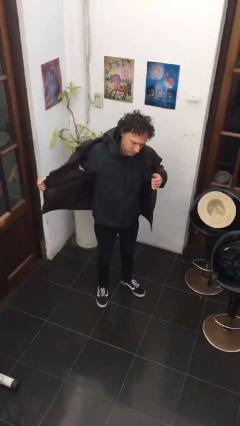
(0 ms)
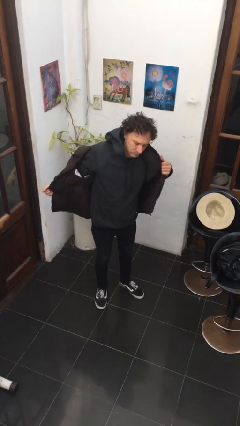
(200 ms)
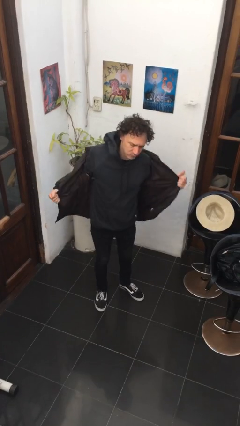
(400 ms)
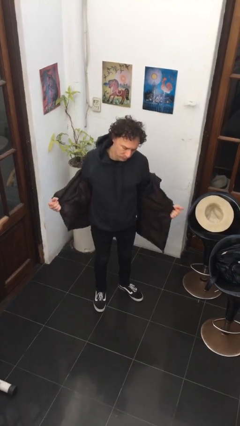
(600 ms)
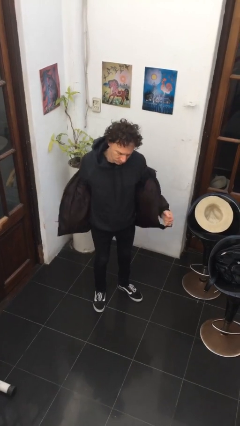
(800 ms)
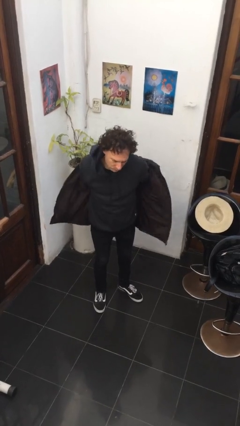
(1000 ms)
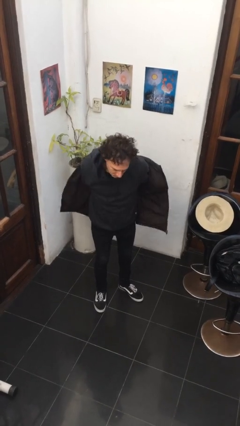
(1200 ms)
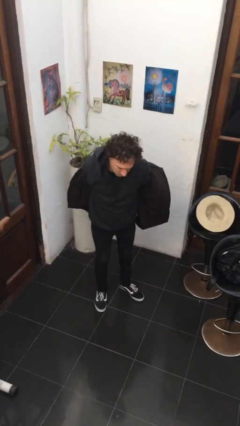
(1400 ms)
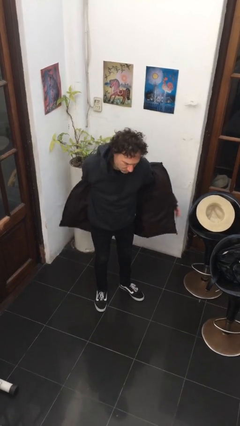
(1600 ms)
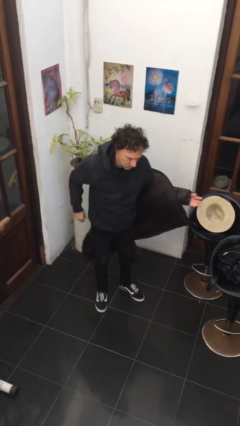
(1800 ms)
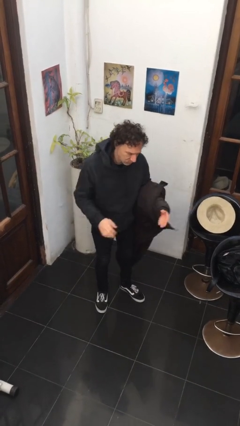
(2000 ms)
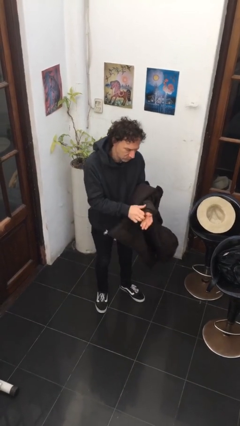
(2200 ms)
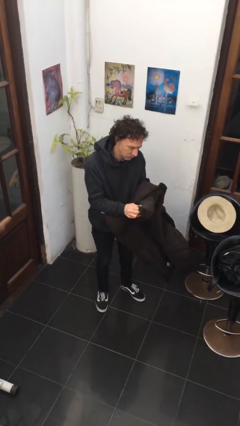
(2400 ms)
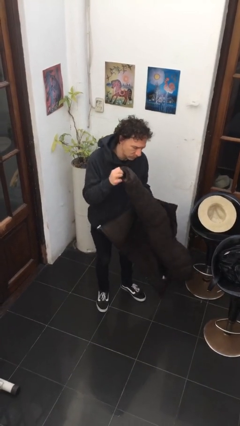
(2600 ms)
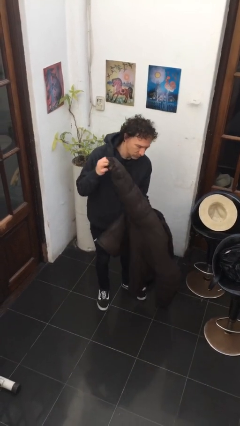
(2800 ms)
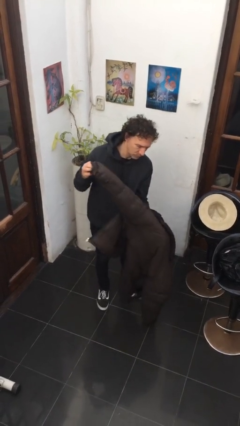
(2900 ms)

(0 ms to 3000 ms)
person takes off jacket

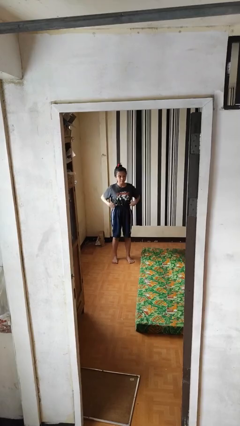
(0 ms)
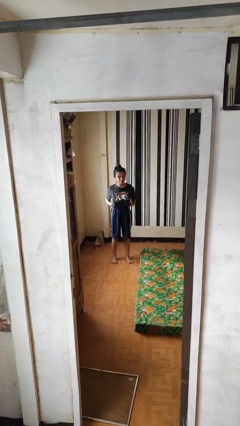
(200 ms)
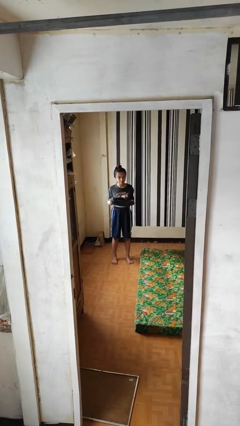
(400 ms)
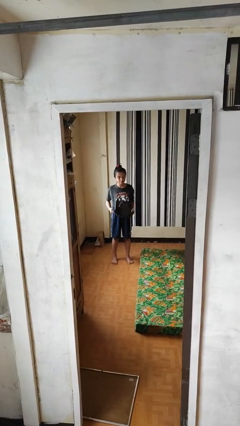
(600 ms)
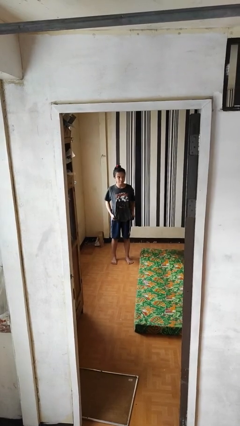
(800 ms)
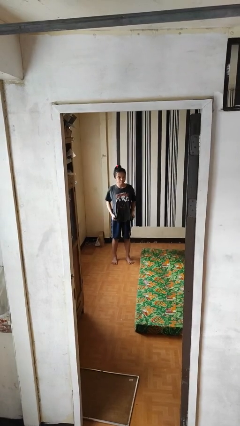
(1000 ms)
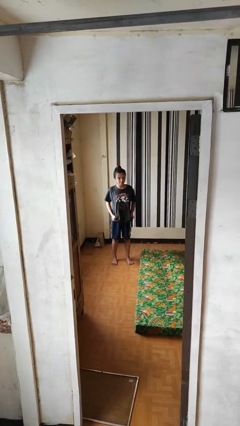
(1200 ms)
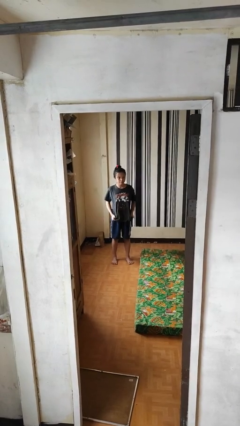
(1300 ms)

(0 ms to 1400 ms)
person untucks shirt

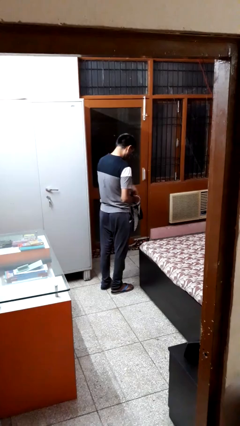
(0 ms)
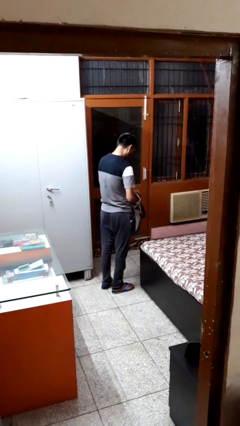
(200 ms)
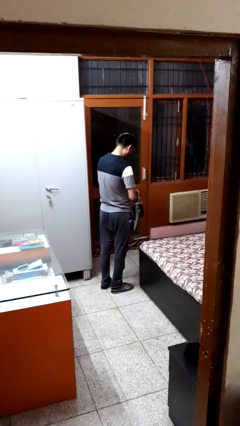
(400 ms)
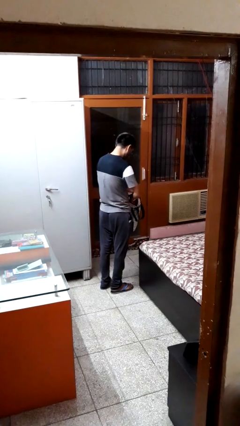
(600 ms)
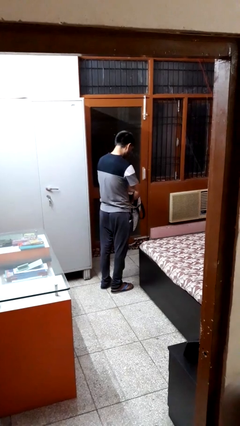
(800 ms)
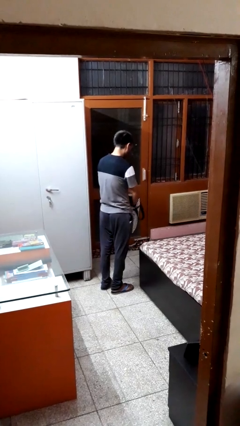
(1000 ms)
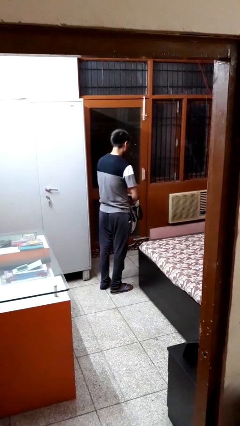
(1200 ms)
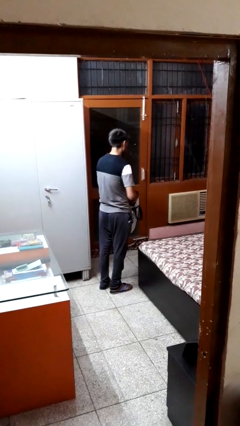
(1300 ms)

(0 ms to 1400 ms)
person puts object into bag

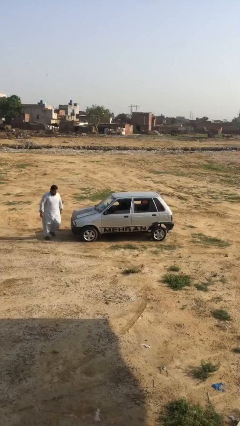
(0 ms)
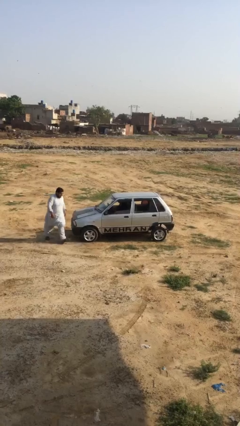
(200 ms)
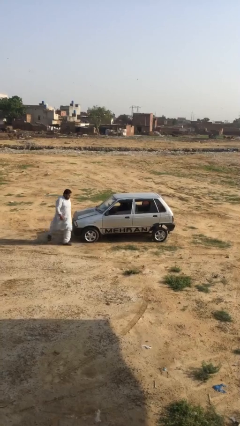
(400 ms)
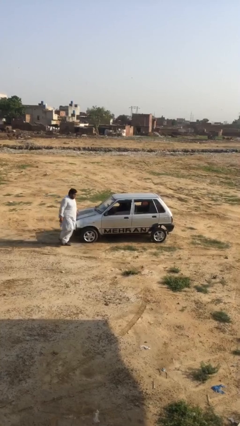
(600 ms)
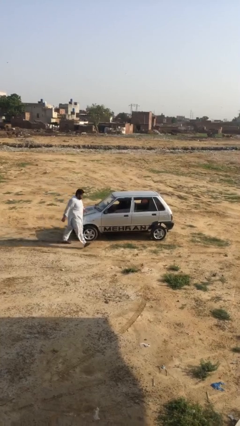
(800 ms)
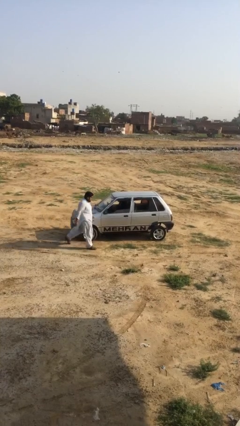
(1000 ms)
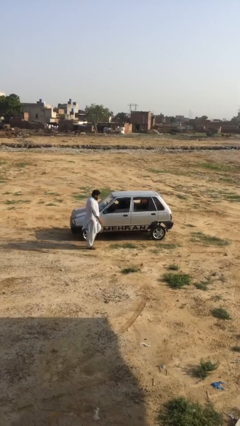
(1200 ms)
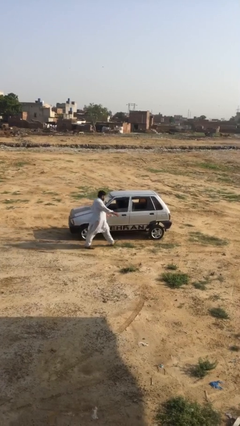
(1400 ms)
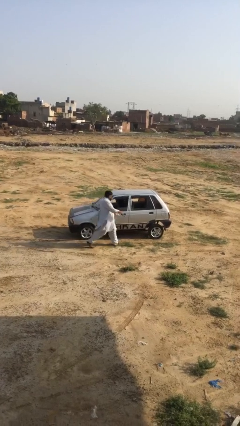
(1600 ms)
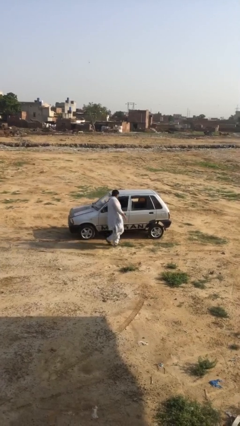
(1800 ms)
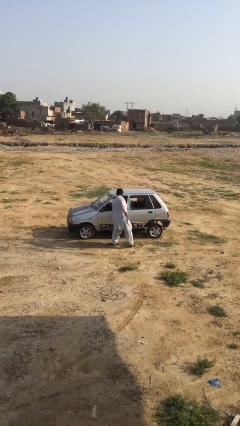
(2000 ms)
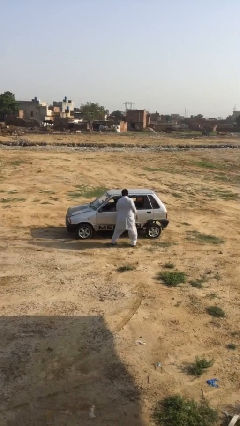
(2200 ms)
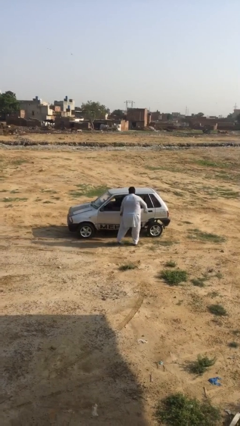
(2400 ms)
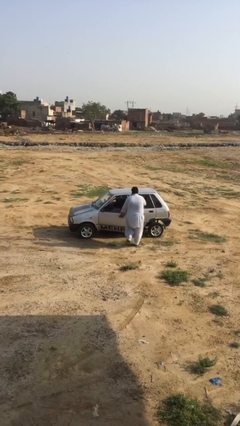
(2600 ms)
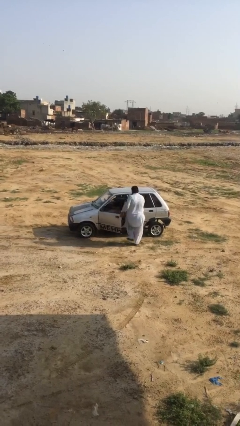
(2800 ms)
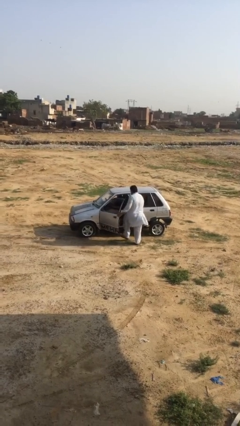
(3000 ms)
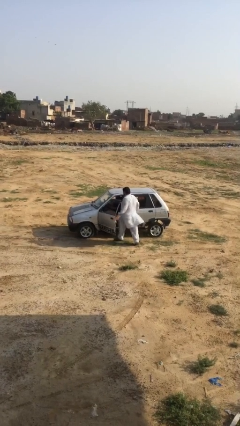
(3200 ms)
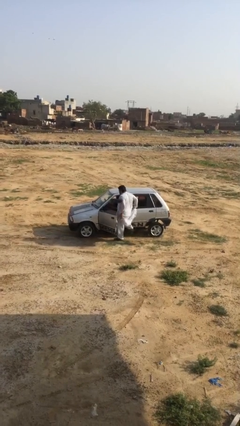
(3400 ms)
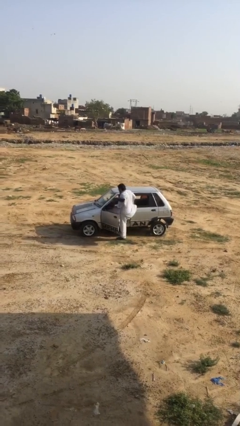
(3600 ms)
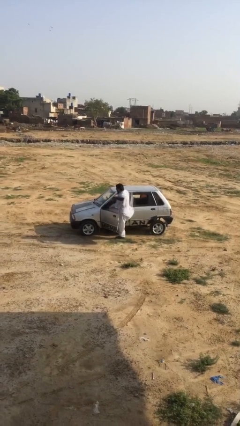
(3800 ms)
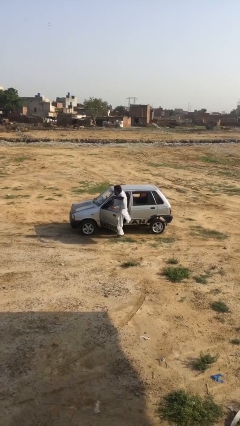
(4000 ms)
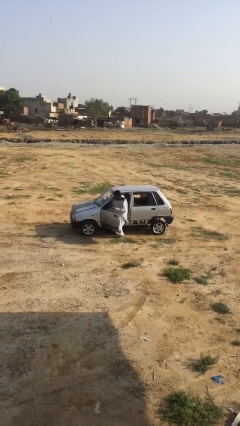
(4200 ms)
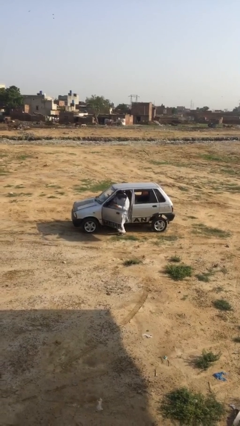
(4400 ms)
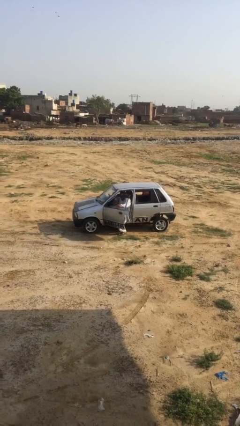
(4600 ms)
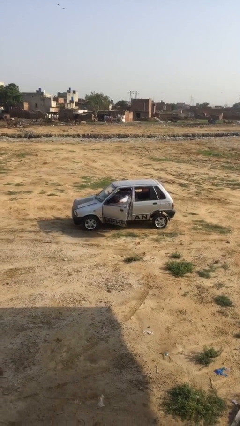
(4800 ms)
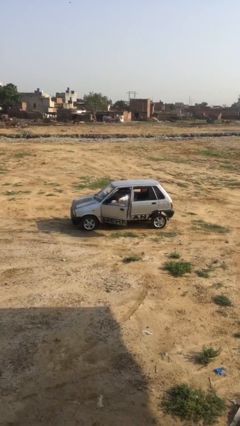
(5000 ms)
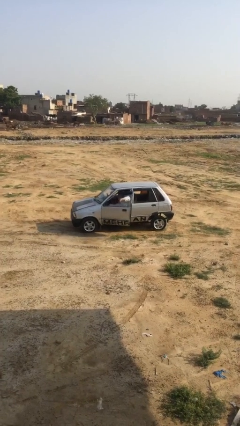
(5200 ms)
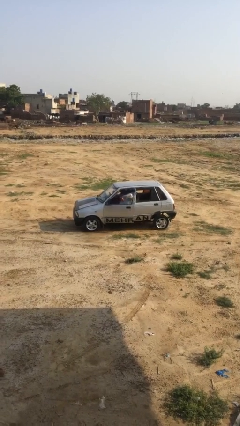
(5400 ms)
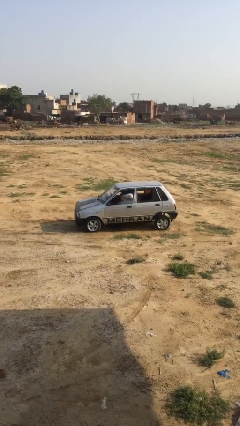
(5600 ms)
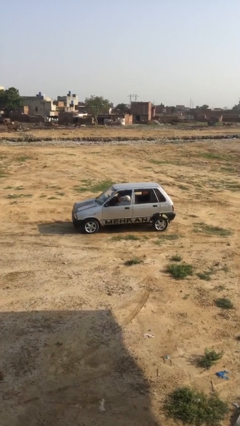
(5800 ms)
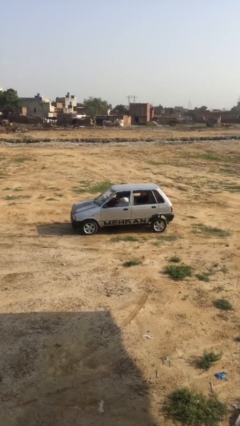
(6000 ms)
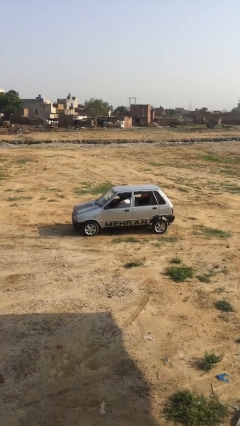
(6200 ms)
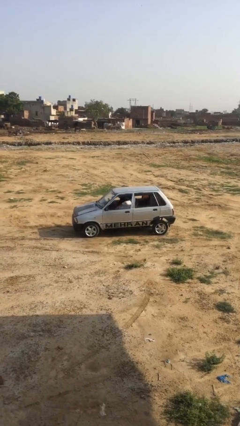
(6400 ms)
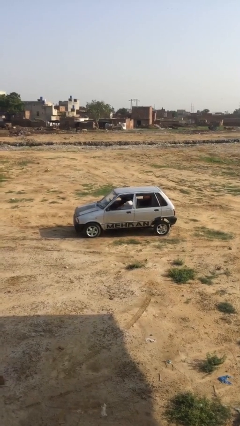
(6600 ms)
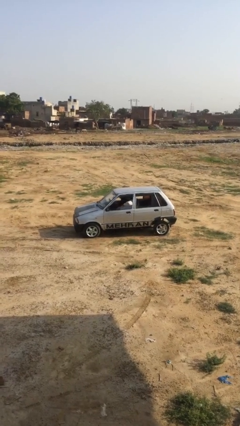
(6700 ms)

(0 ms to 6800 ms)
car picks up person

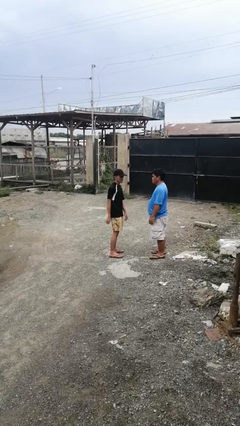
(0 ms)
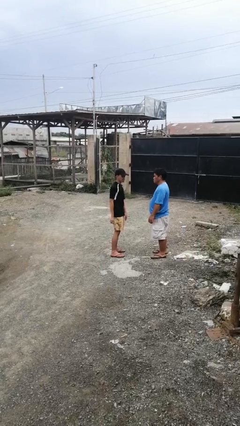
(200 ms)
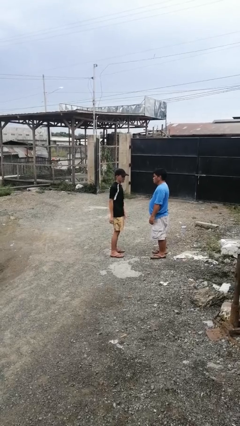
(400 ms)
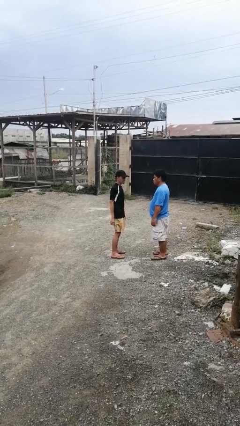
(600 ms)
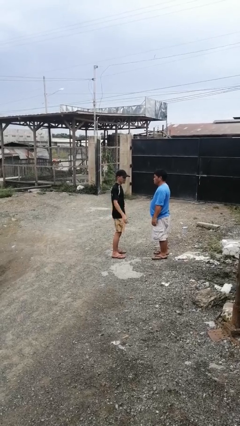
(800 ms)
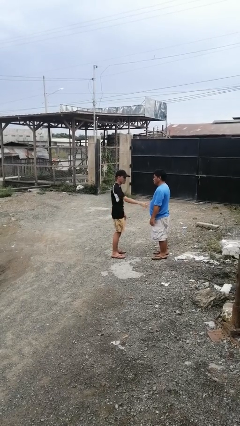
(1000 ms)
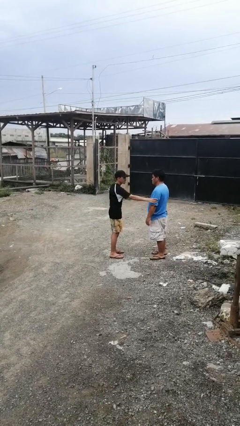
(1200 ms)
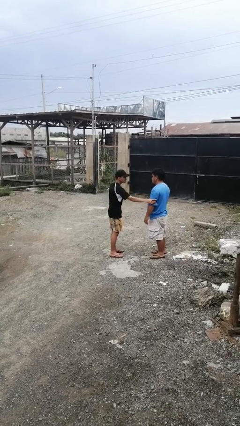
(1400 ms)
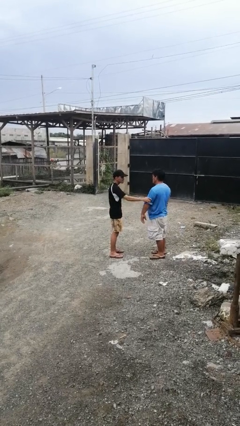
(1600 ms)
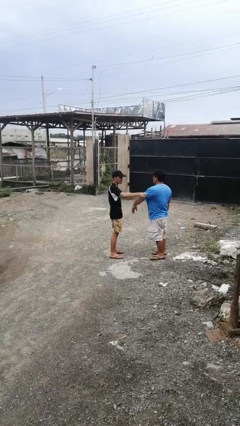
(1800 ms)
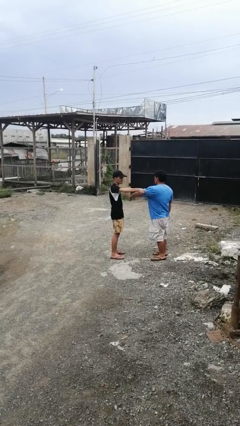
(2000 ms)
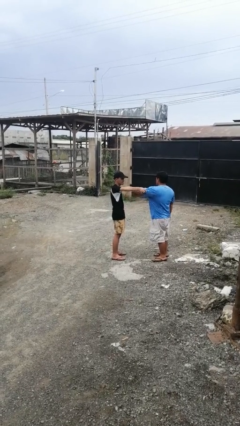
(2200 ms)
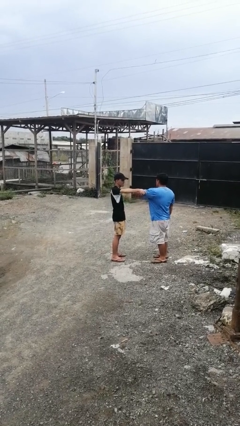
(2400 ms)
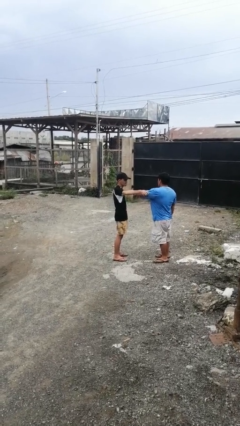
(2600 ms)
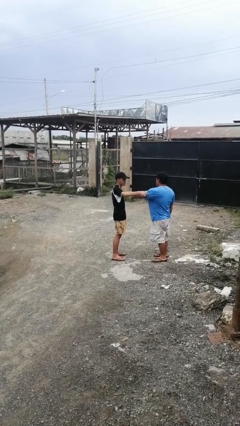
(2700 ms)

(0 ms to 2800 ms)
person grabs person by bicep

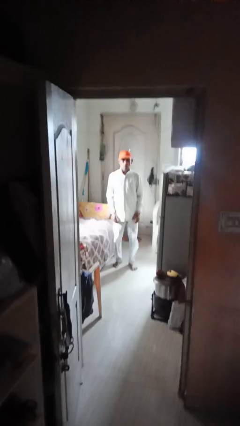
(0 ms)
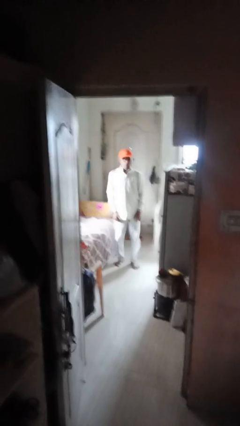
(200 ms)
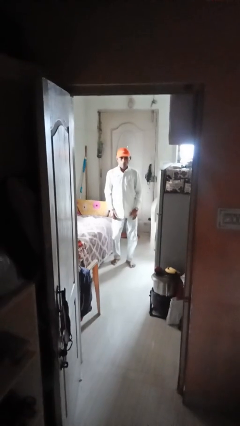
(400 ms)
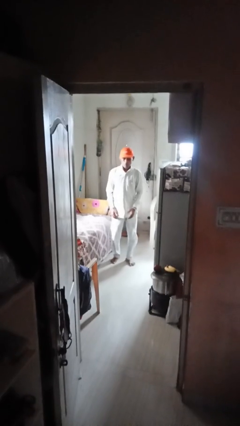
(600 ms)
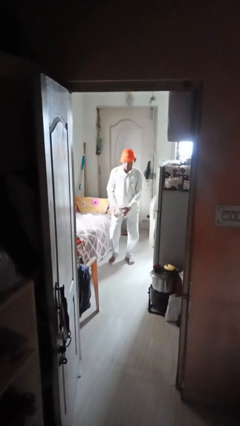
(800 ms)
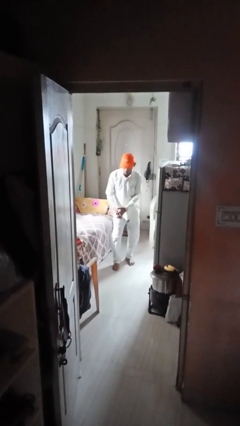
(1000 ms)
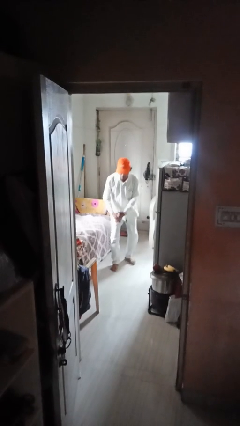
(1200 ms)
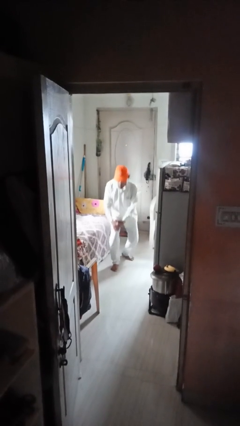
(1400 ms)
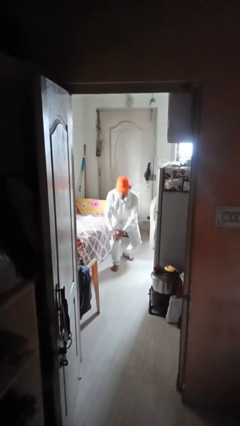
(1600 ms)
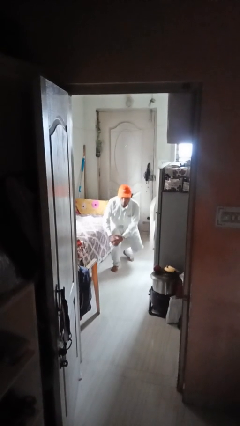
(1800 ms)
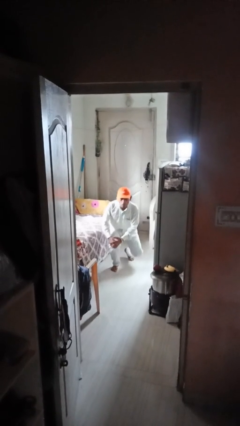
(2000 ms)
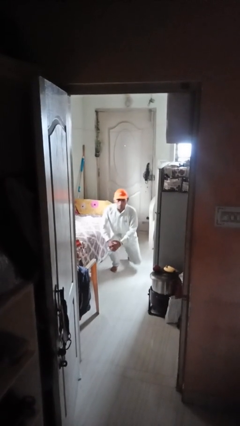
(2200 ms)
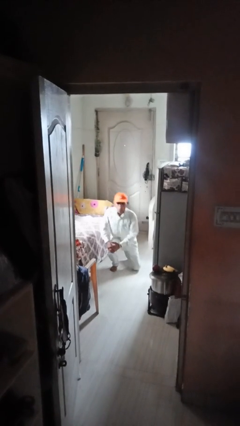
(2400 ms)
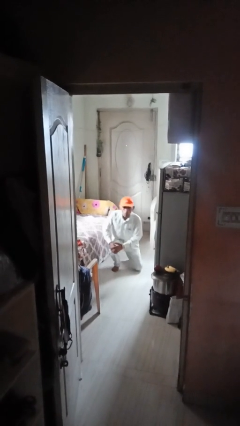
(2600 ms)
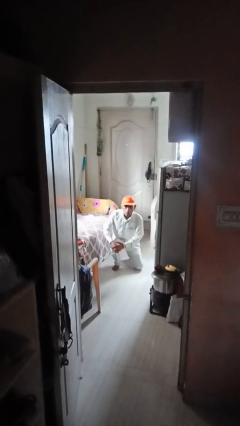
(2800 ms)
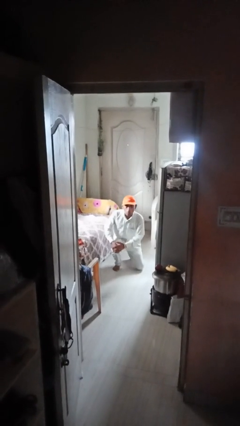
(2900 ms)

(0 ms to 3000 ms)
person exercises with lunges
